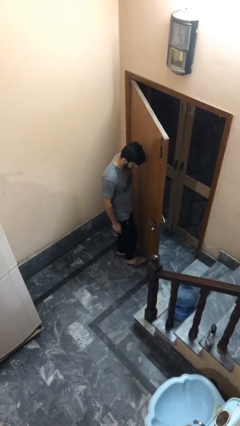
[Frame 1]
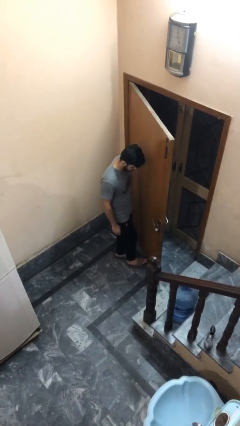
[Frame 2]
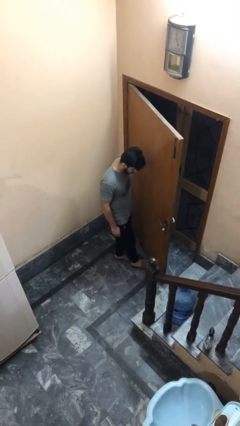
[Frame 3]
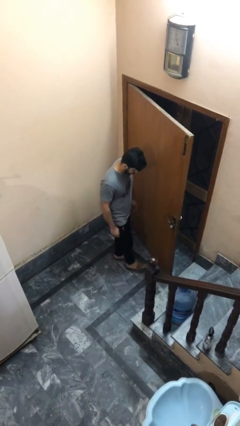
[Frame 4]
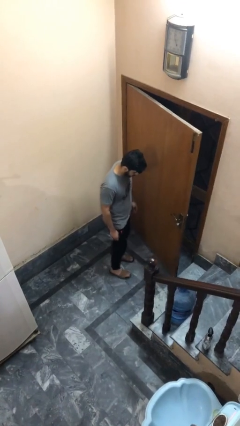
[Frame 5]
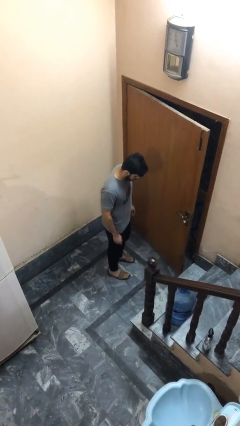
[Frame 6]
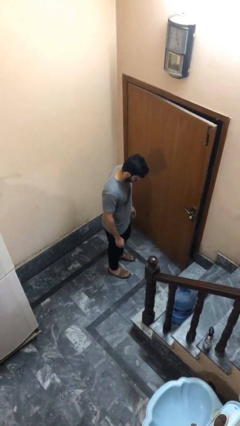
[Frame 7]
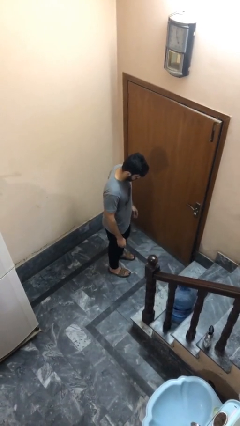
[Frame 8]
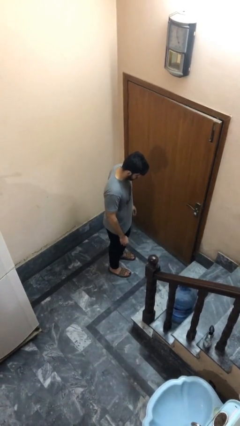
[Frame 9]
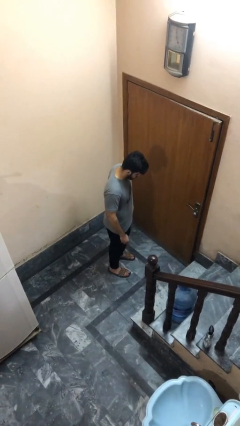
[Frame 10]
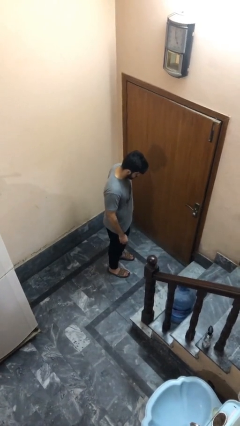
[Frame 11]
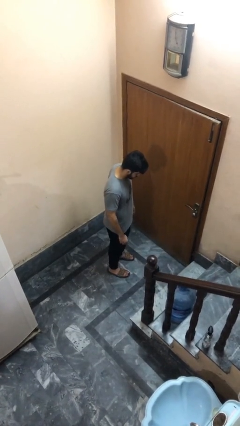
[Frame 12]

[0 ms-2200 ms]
person closes door with foot

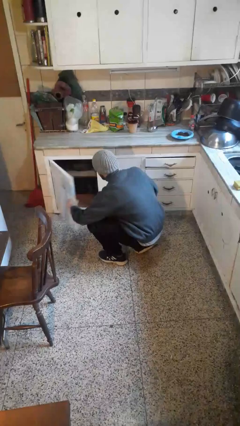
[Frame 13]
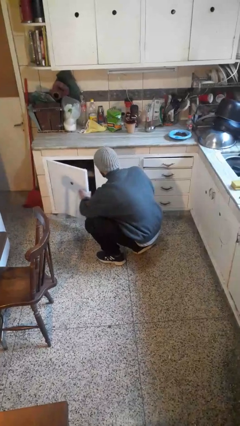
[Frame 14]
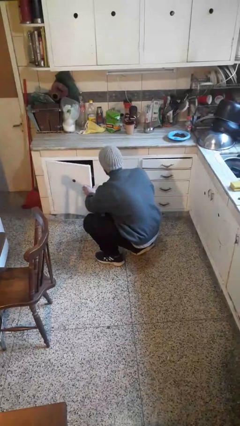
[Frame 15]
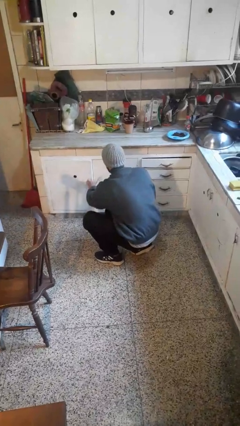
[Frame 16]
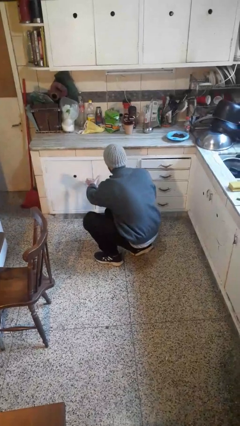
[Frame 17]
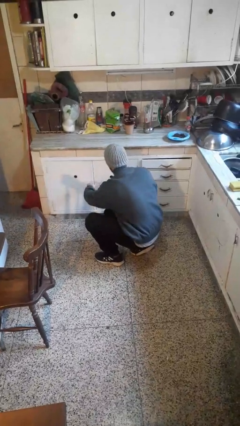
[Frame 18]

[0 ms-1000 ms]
person closes cabinet

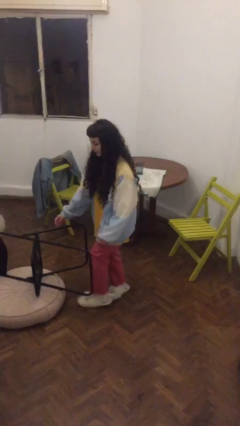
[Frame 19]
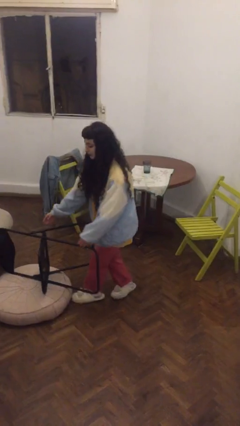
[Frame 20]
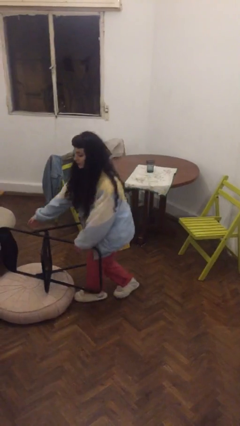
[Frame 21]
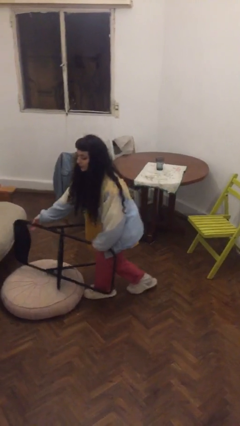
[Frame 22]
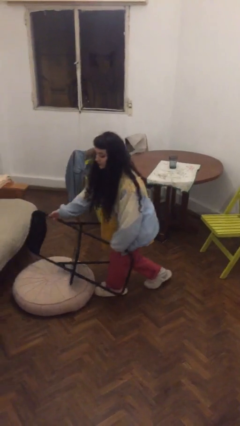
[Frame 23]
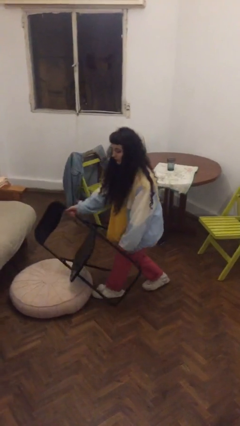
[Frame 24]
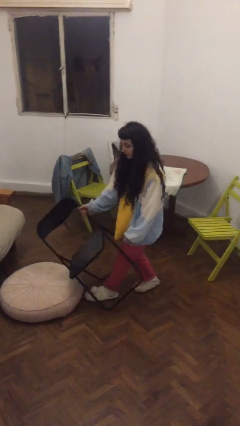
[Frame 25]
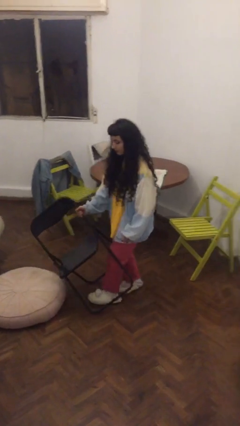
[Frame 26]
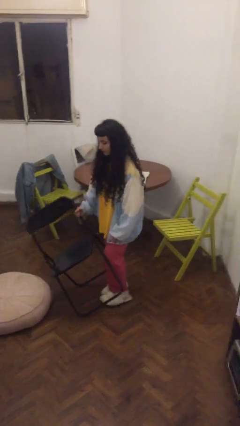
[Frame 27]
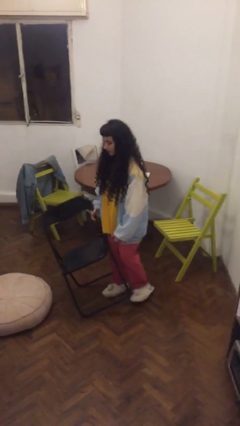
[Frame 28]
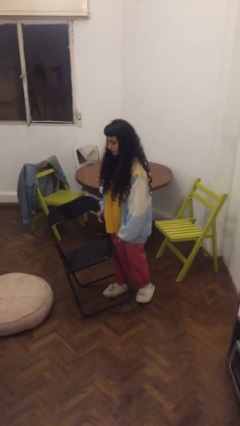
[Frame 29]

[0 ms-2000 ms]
person sets upright furniture

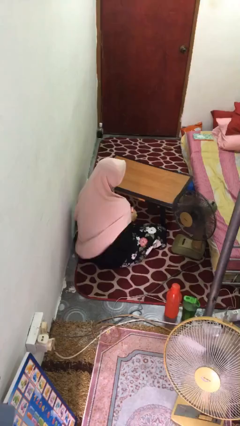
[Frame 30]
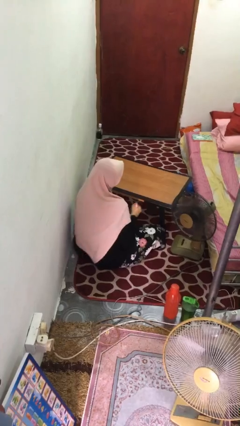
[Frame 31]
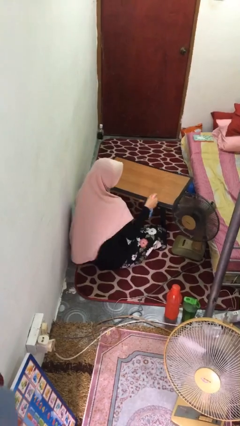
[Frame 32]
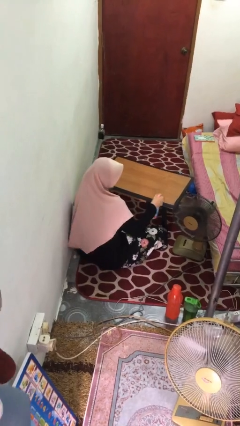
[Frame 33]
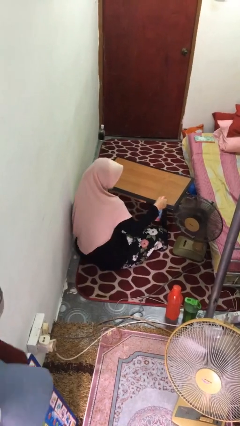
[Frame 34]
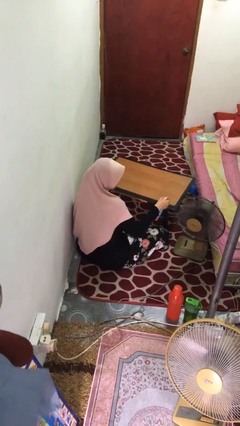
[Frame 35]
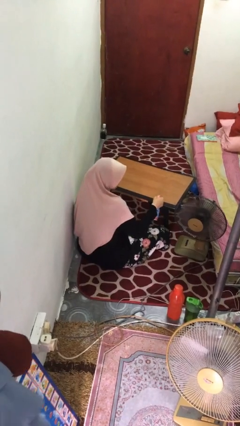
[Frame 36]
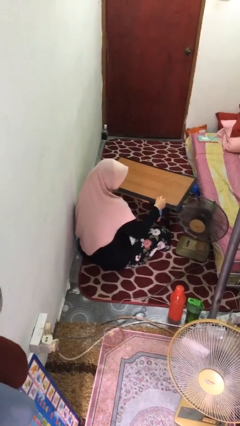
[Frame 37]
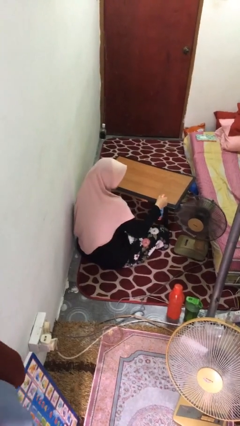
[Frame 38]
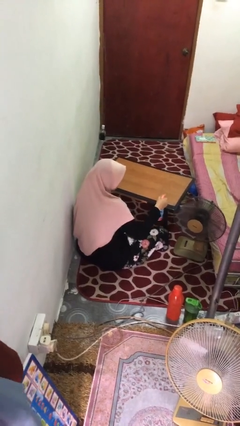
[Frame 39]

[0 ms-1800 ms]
person sprays from bottle

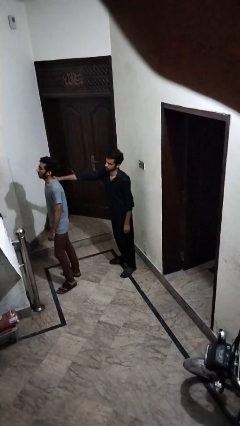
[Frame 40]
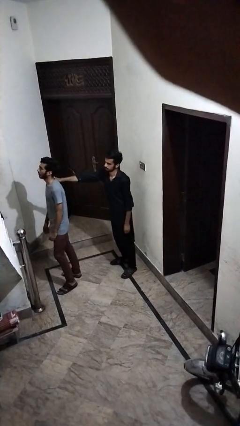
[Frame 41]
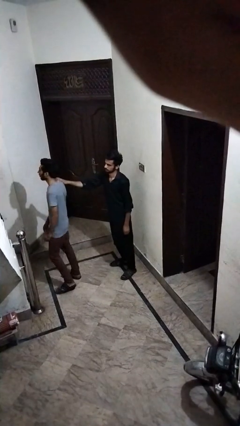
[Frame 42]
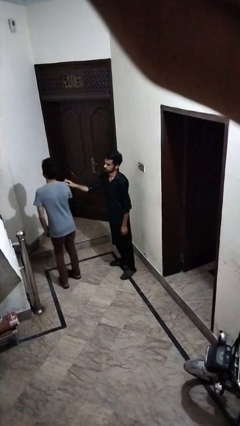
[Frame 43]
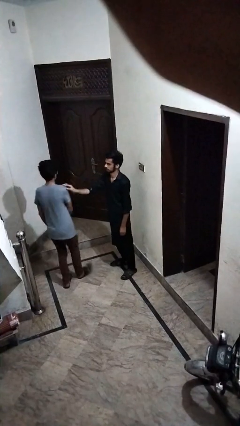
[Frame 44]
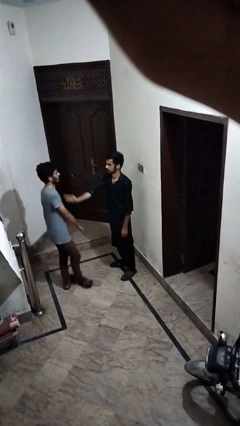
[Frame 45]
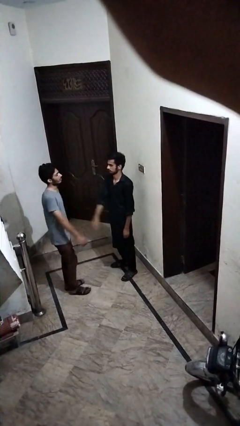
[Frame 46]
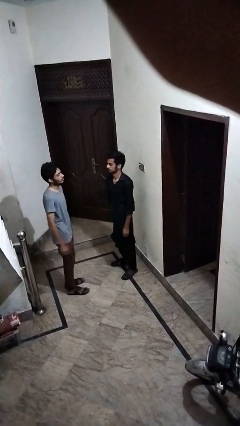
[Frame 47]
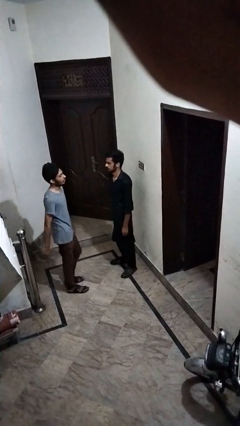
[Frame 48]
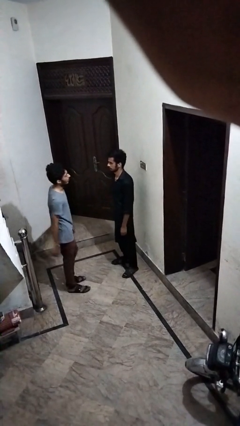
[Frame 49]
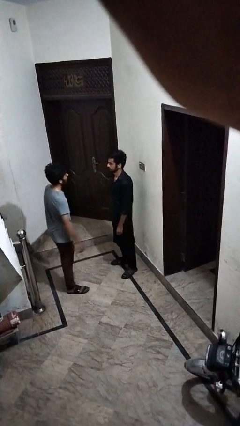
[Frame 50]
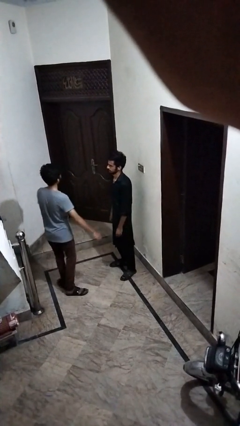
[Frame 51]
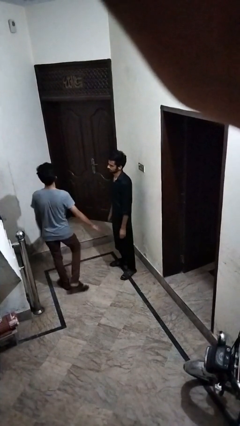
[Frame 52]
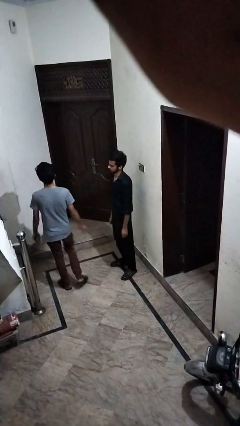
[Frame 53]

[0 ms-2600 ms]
person spins person around

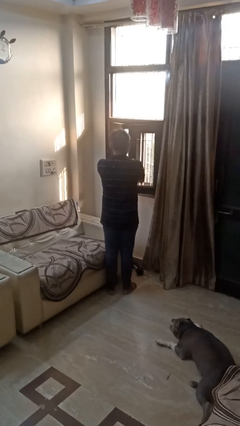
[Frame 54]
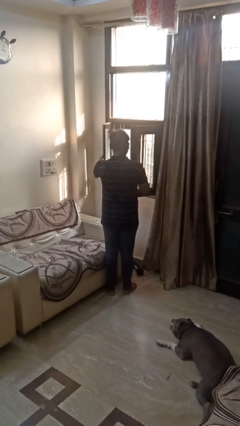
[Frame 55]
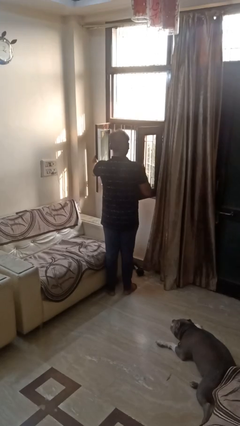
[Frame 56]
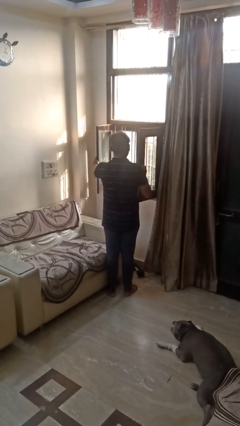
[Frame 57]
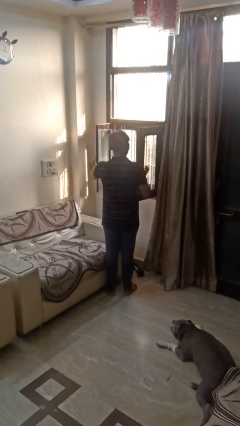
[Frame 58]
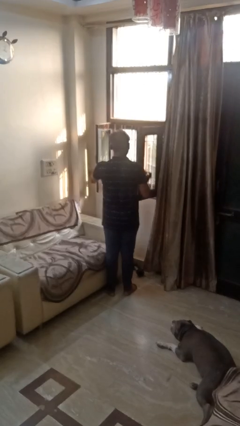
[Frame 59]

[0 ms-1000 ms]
person opens home window

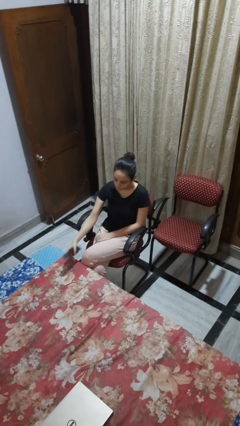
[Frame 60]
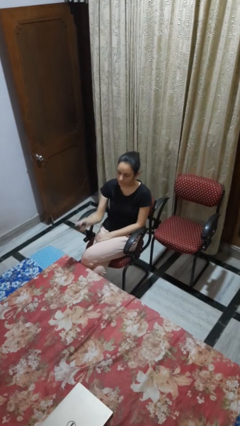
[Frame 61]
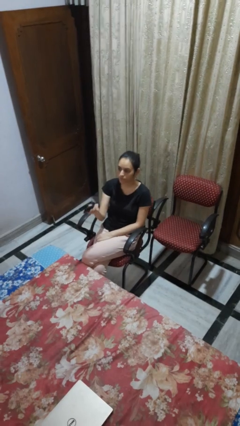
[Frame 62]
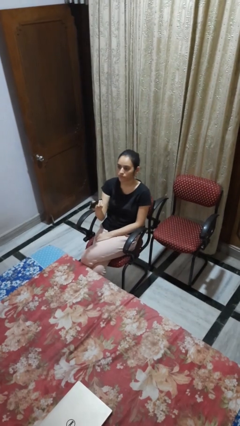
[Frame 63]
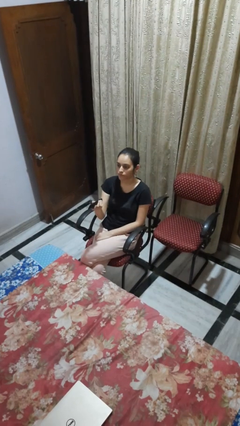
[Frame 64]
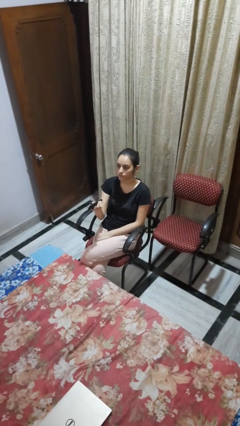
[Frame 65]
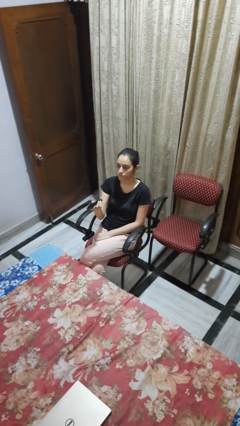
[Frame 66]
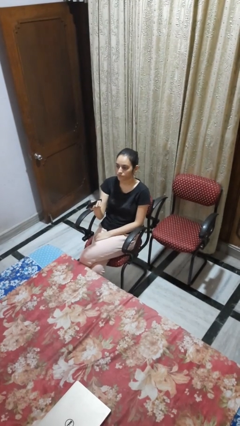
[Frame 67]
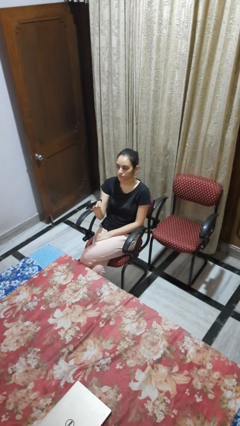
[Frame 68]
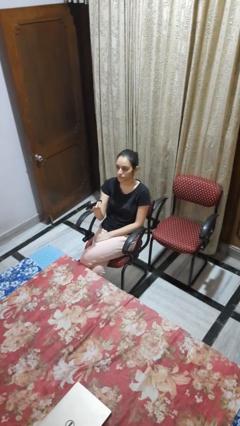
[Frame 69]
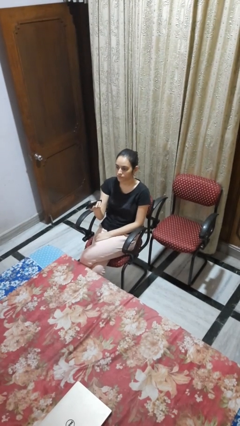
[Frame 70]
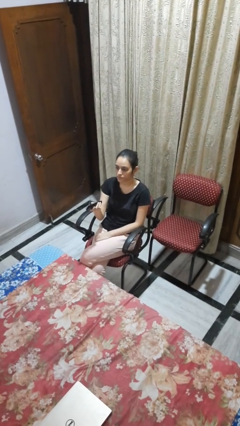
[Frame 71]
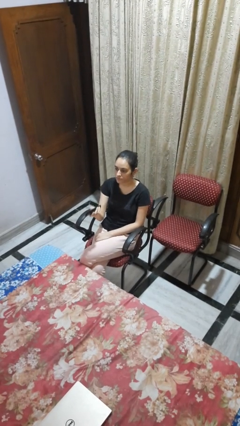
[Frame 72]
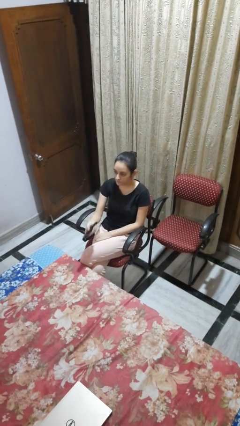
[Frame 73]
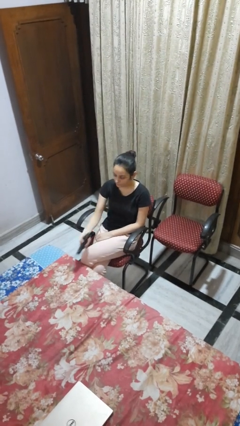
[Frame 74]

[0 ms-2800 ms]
person uses television remote

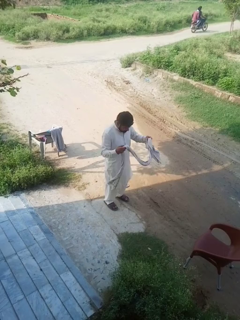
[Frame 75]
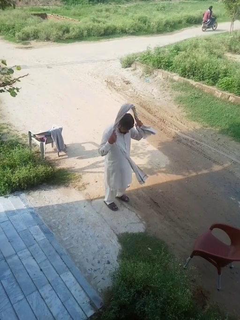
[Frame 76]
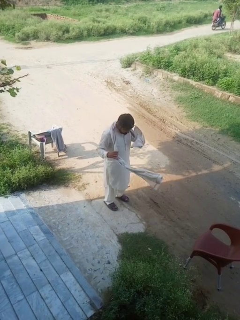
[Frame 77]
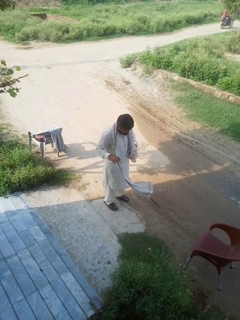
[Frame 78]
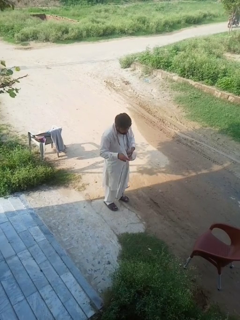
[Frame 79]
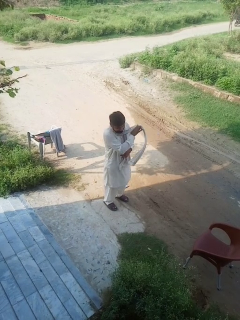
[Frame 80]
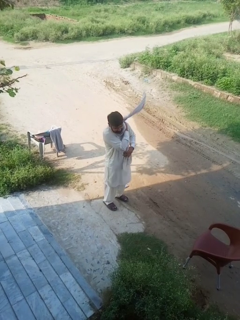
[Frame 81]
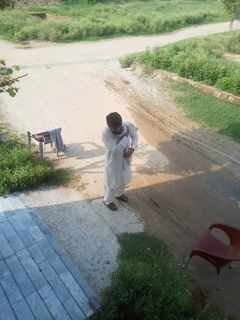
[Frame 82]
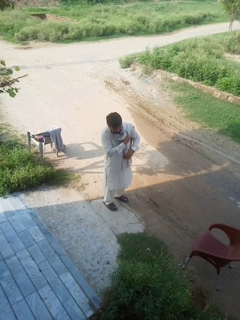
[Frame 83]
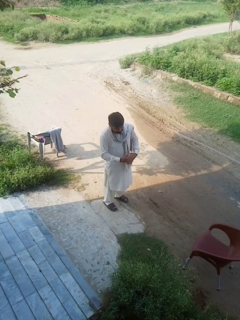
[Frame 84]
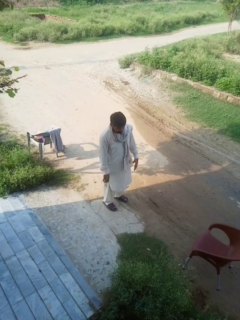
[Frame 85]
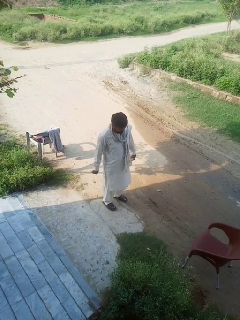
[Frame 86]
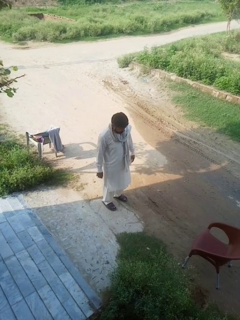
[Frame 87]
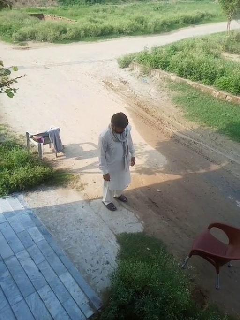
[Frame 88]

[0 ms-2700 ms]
person puts on scarf

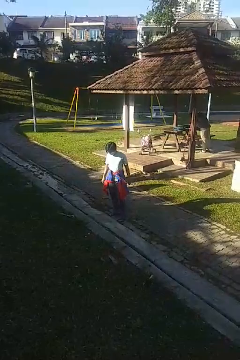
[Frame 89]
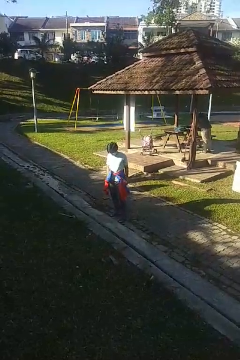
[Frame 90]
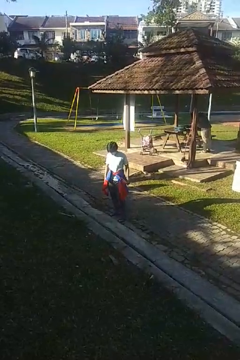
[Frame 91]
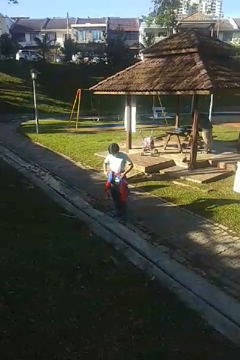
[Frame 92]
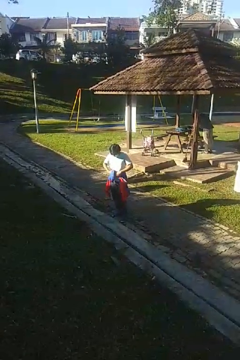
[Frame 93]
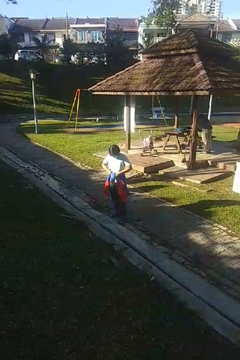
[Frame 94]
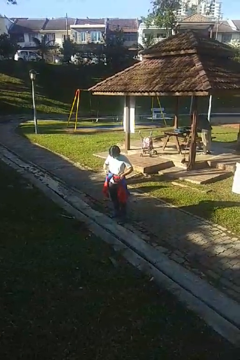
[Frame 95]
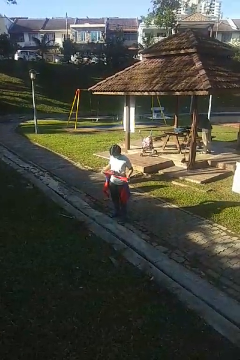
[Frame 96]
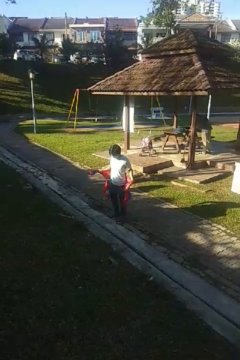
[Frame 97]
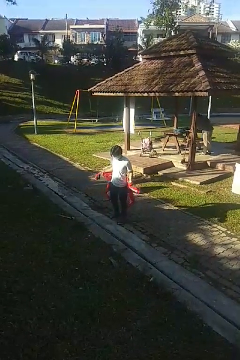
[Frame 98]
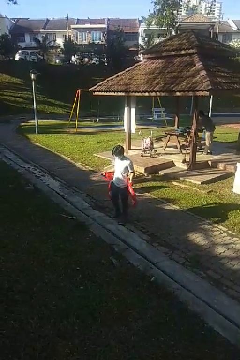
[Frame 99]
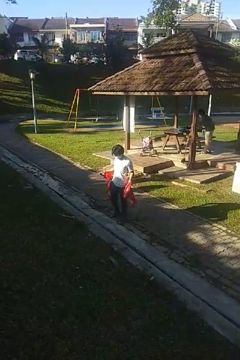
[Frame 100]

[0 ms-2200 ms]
person unties jacket around waist
